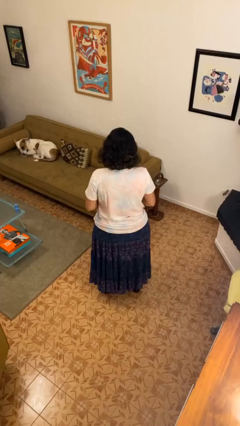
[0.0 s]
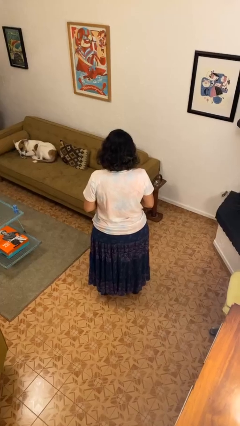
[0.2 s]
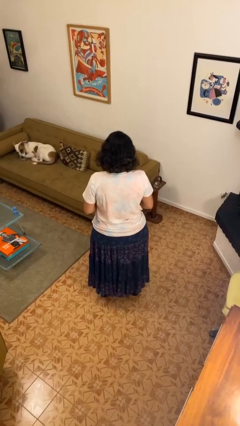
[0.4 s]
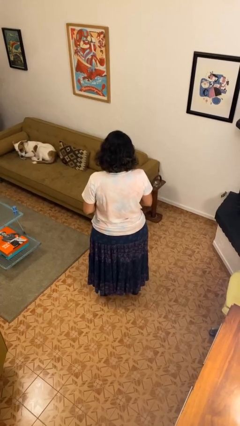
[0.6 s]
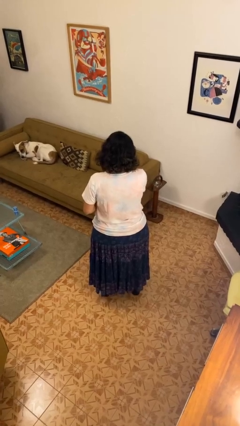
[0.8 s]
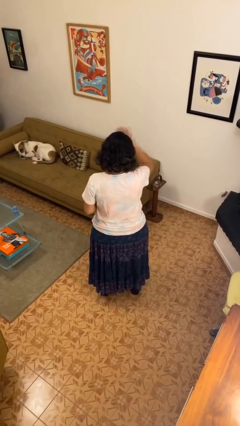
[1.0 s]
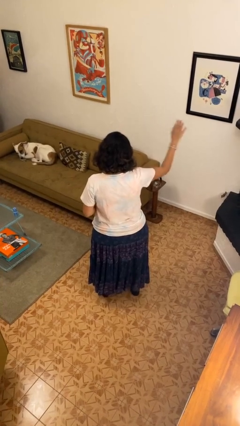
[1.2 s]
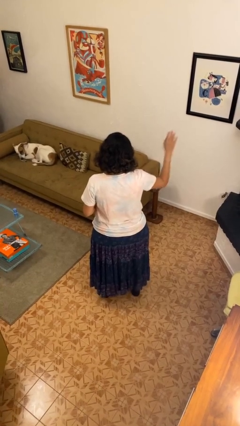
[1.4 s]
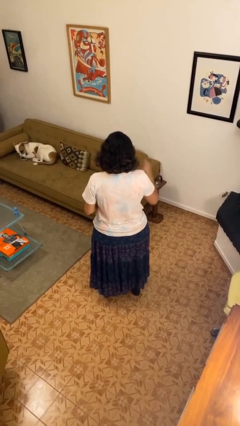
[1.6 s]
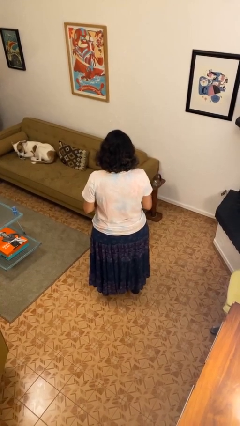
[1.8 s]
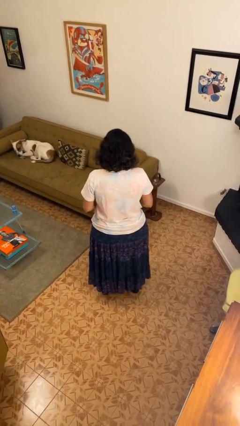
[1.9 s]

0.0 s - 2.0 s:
person gestures swipe right

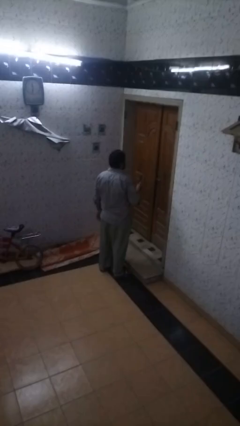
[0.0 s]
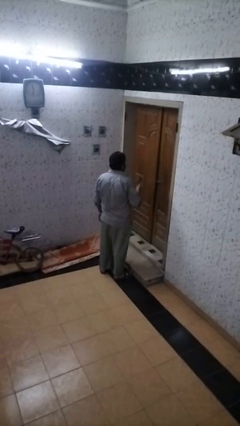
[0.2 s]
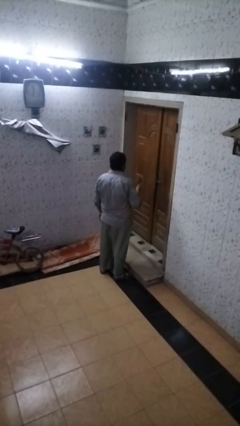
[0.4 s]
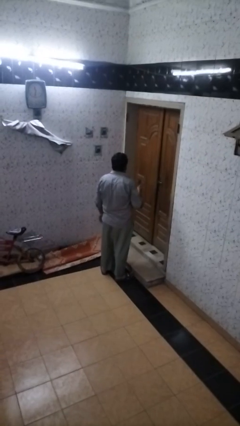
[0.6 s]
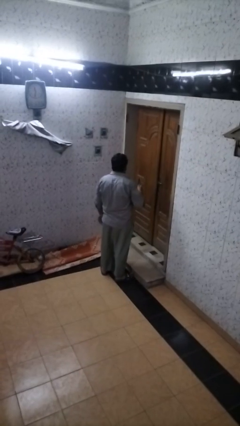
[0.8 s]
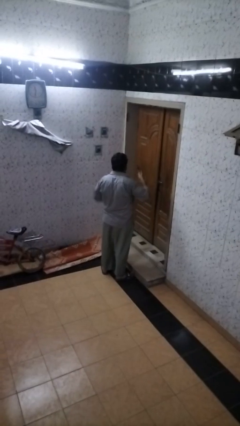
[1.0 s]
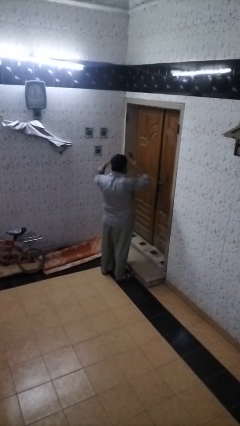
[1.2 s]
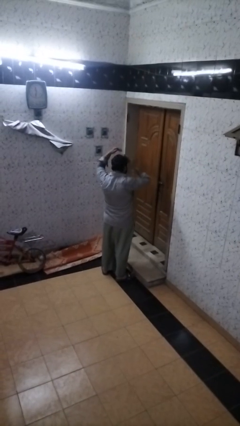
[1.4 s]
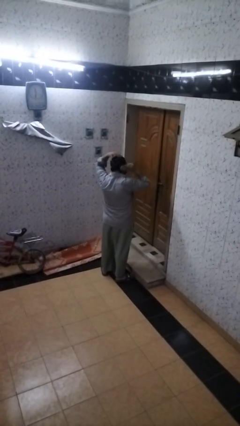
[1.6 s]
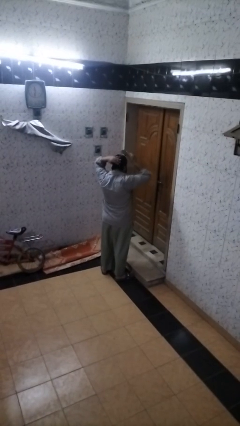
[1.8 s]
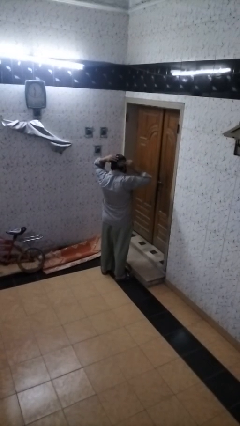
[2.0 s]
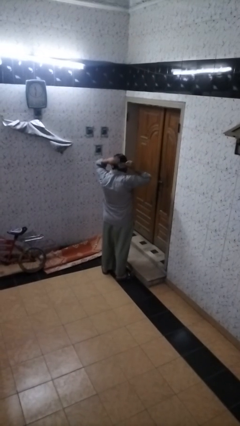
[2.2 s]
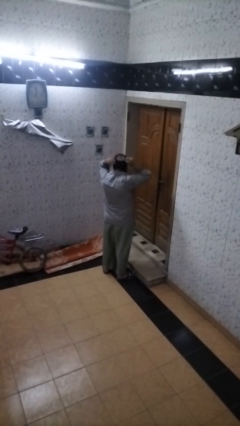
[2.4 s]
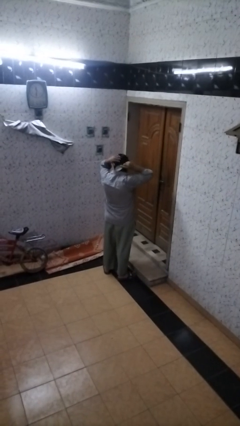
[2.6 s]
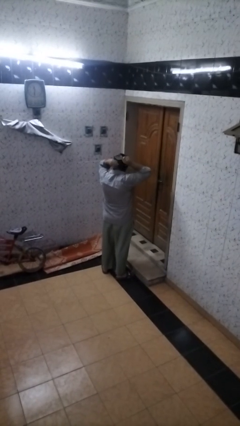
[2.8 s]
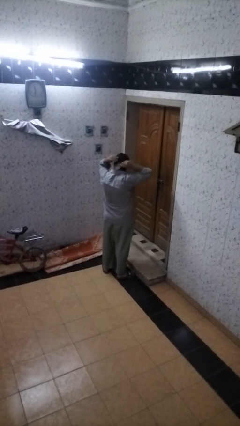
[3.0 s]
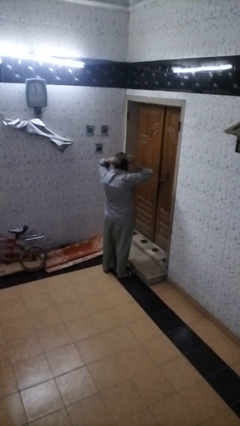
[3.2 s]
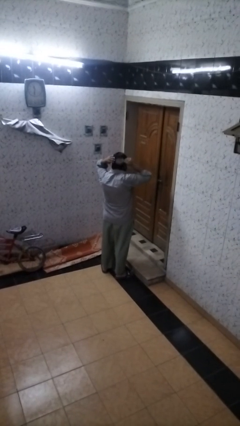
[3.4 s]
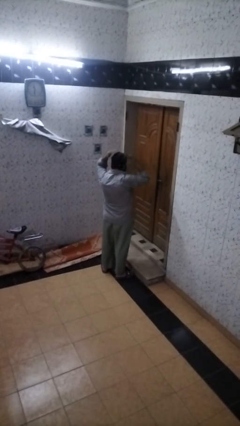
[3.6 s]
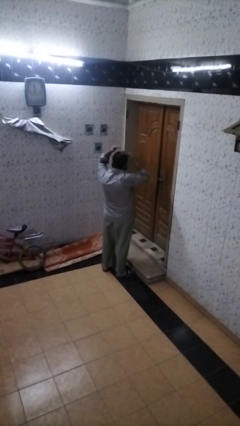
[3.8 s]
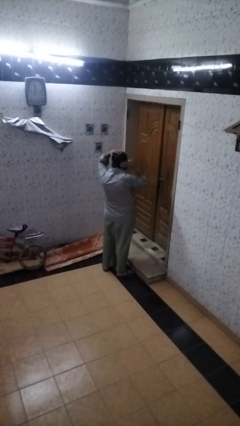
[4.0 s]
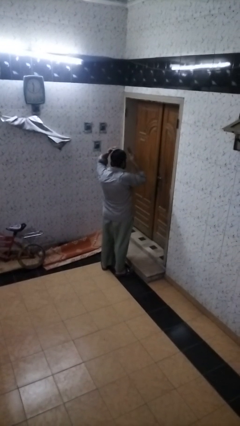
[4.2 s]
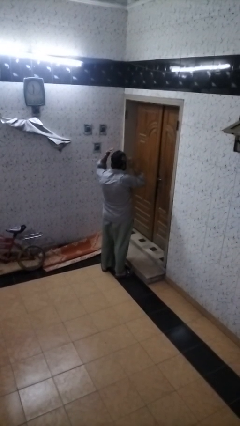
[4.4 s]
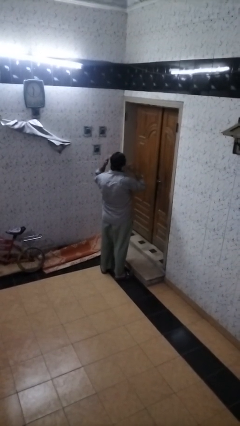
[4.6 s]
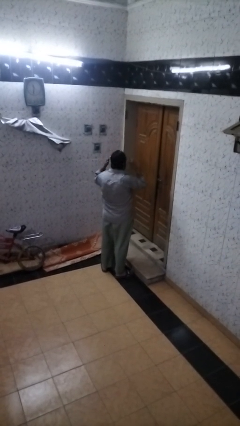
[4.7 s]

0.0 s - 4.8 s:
person brushes hair

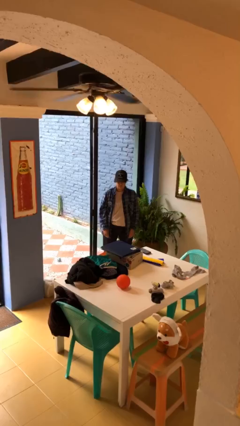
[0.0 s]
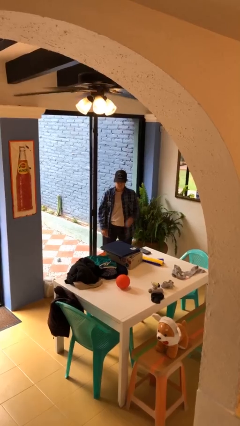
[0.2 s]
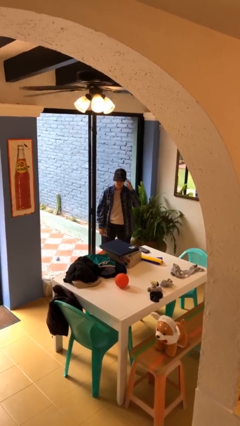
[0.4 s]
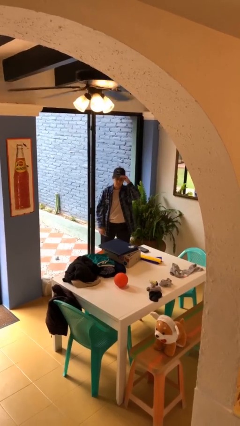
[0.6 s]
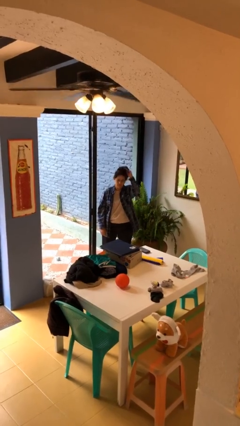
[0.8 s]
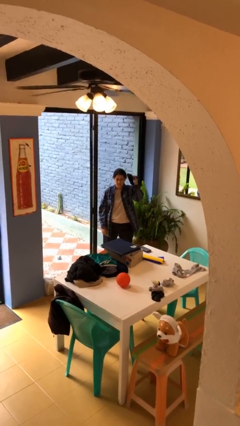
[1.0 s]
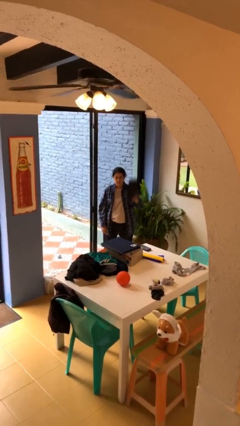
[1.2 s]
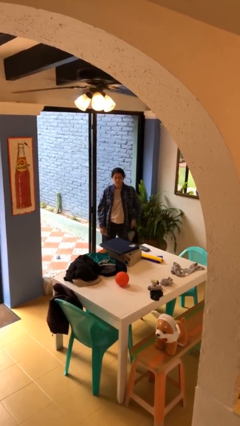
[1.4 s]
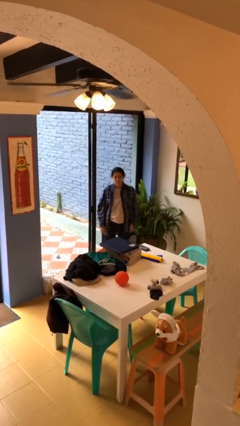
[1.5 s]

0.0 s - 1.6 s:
person takes off hat

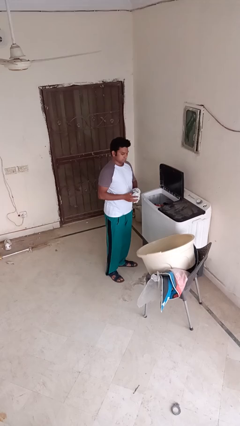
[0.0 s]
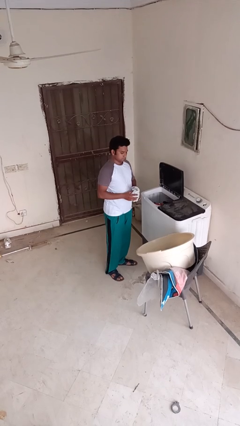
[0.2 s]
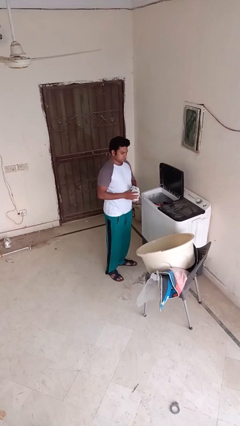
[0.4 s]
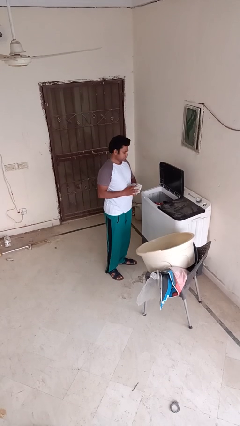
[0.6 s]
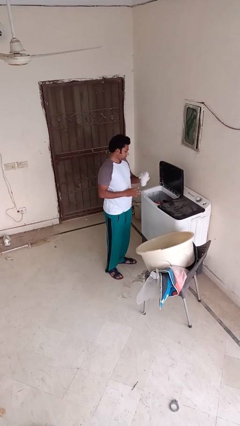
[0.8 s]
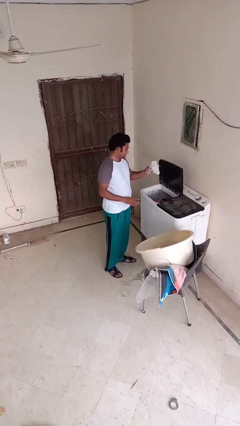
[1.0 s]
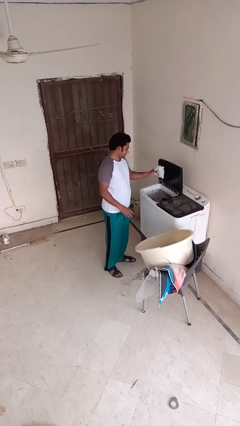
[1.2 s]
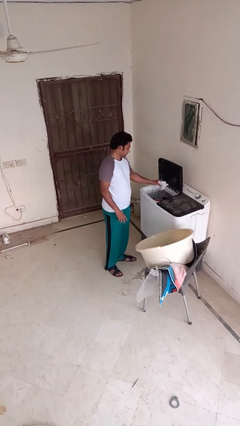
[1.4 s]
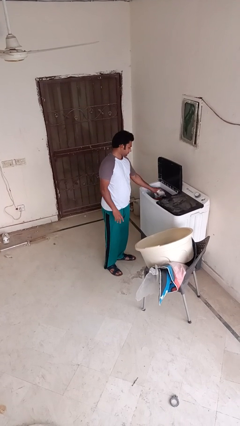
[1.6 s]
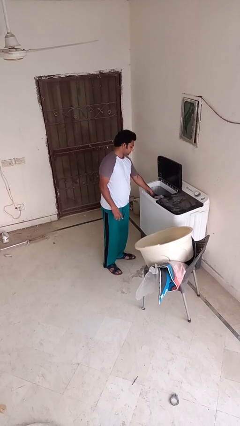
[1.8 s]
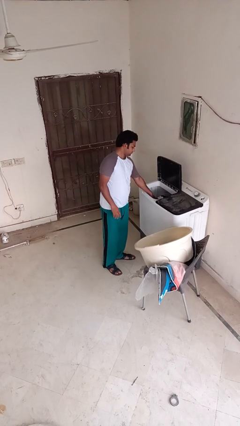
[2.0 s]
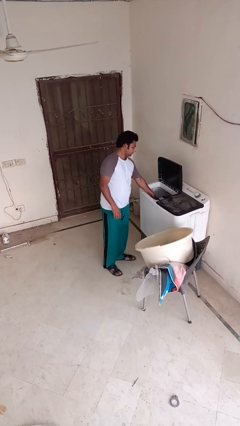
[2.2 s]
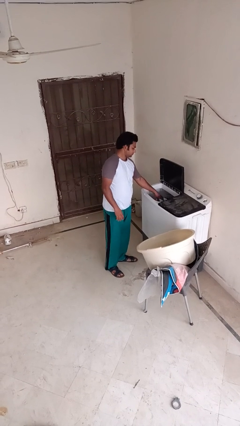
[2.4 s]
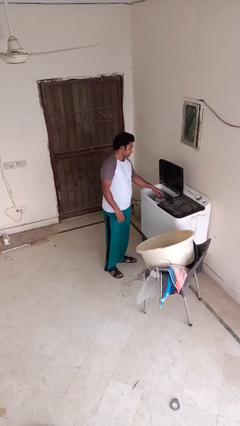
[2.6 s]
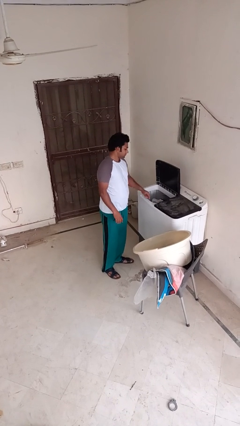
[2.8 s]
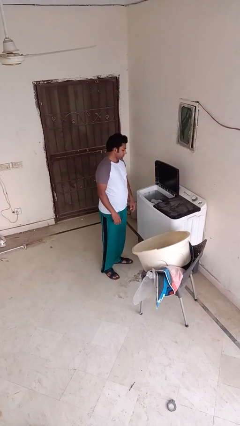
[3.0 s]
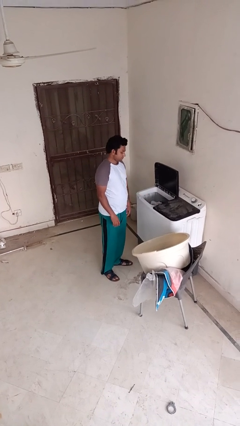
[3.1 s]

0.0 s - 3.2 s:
person loads clotheswasher

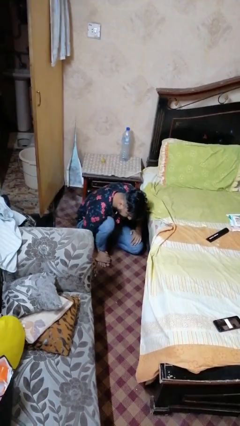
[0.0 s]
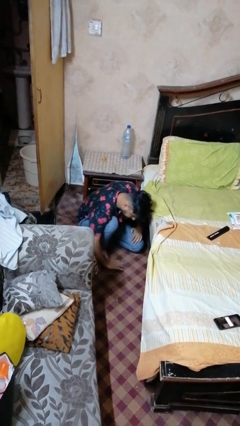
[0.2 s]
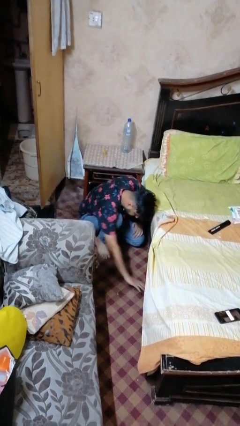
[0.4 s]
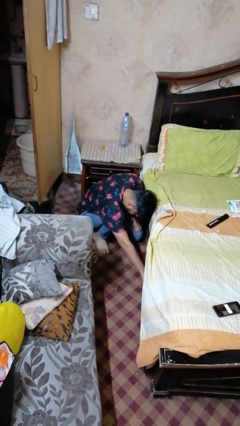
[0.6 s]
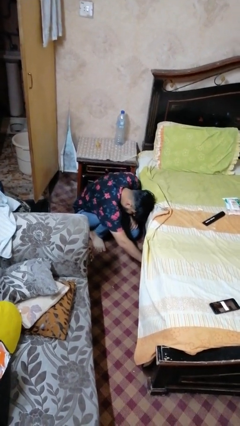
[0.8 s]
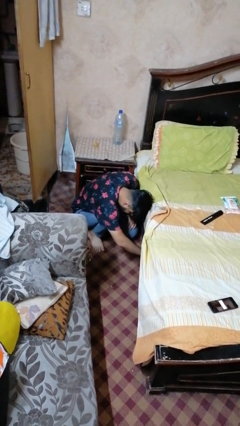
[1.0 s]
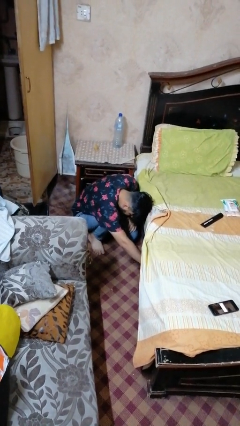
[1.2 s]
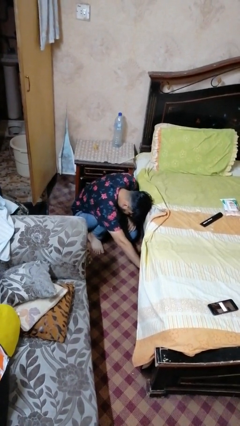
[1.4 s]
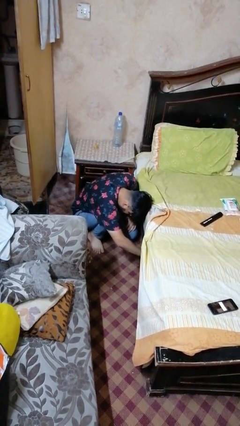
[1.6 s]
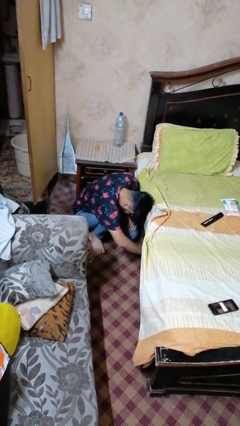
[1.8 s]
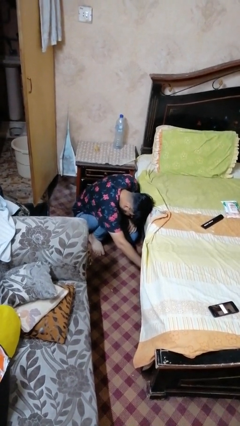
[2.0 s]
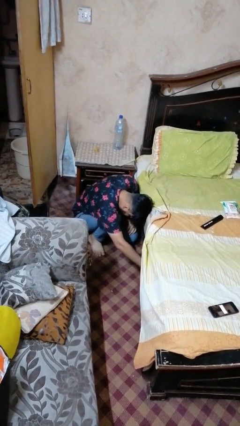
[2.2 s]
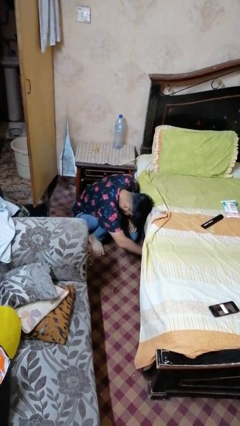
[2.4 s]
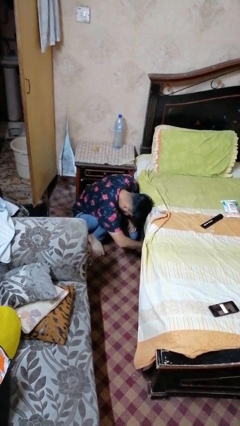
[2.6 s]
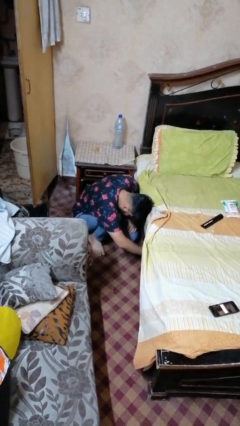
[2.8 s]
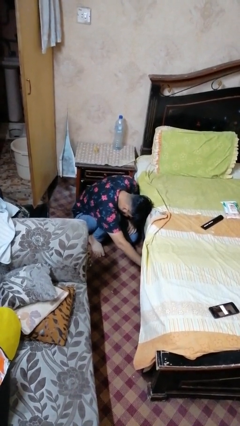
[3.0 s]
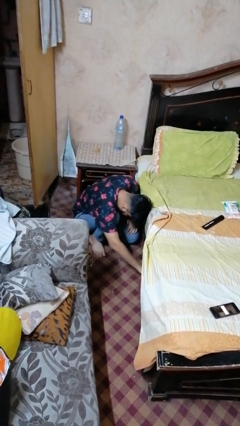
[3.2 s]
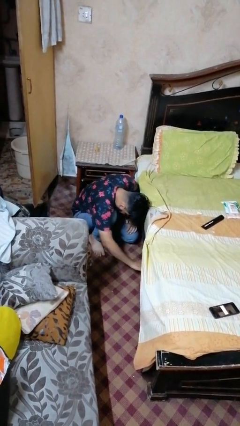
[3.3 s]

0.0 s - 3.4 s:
person searches under bed

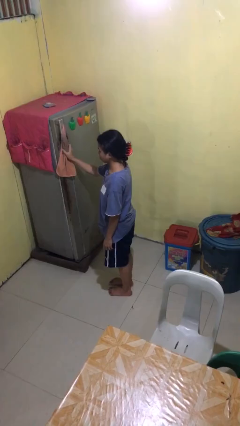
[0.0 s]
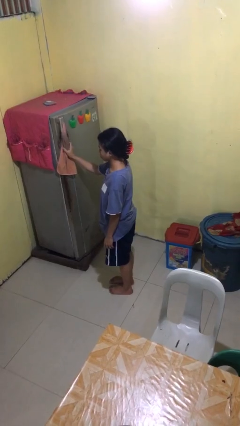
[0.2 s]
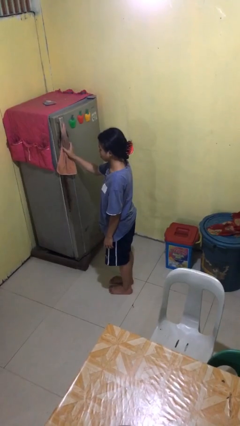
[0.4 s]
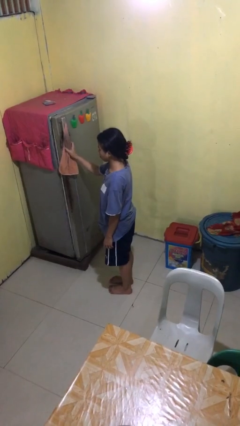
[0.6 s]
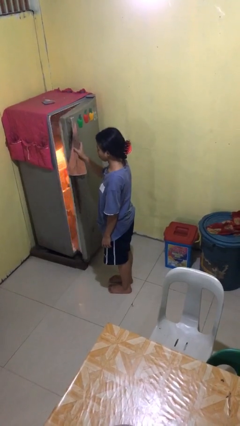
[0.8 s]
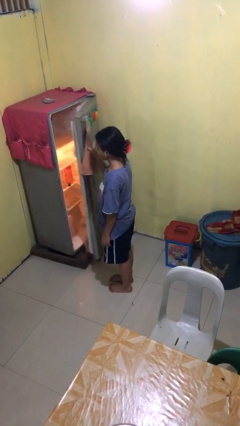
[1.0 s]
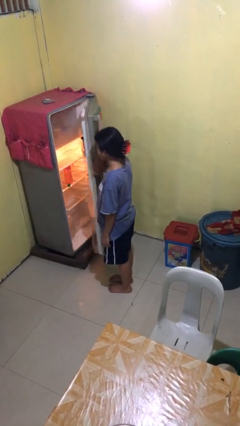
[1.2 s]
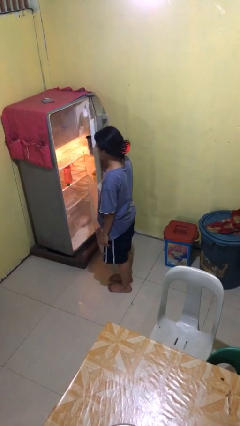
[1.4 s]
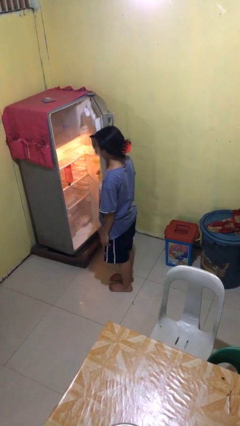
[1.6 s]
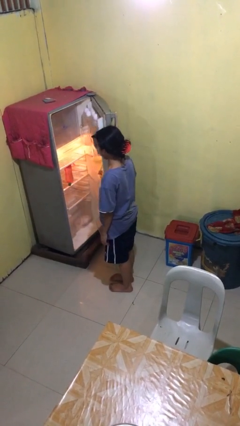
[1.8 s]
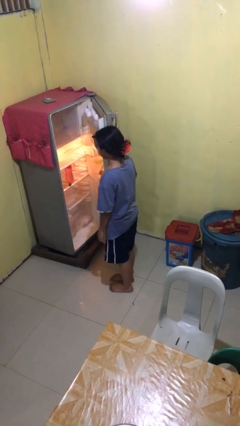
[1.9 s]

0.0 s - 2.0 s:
person opens refrigerator

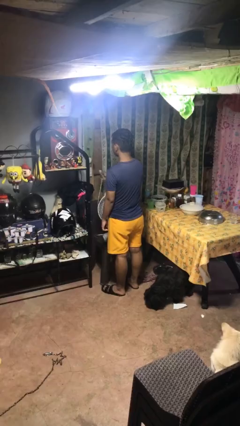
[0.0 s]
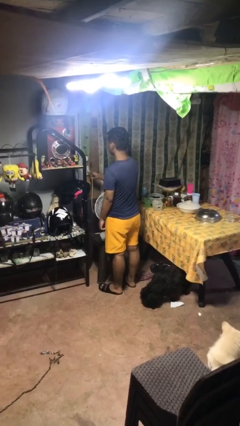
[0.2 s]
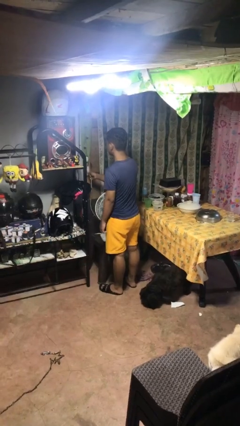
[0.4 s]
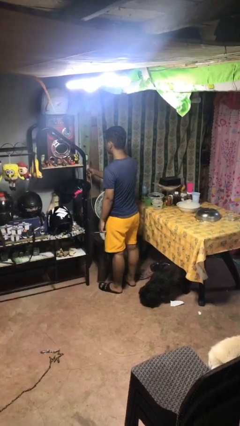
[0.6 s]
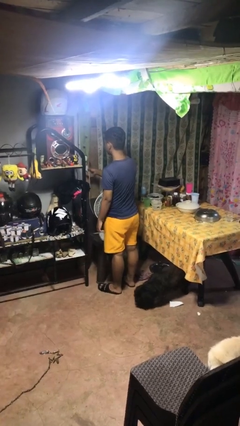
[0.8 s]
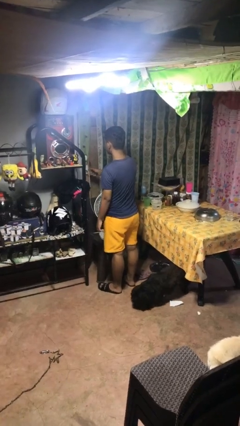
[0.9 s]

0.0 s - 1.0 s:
person plugs into electrical socket
